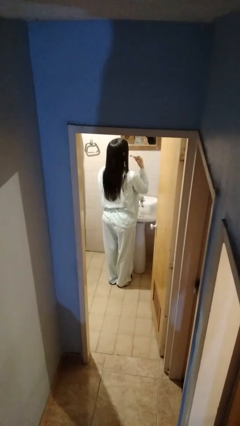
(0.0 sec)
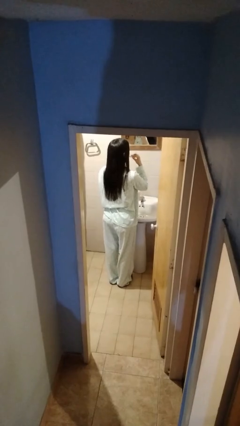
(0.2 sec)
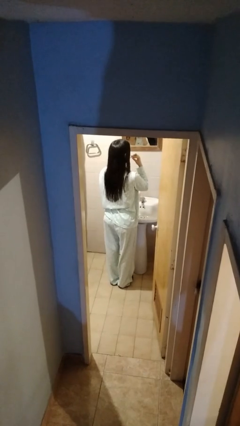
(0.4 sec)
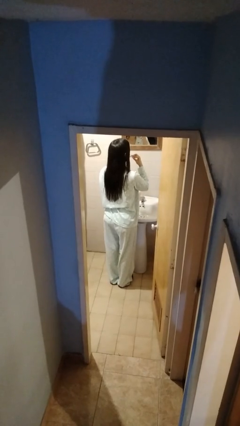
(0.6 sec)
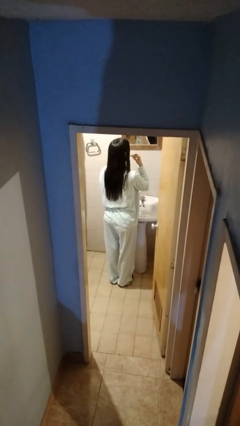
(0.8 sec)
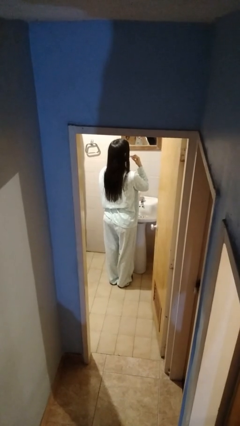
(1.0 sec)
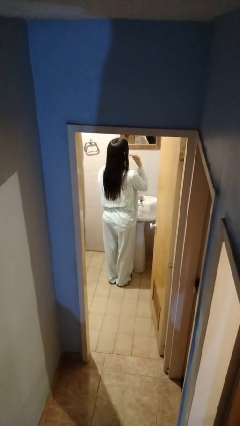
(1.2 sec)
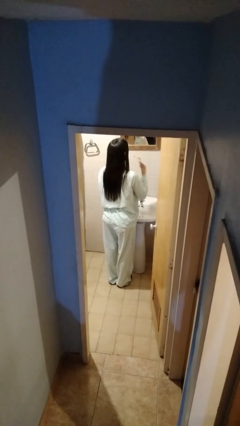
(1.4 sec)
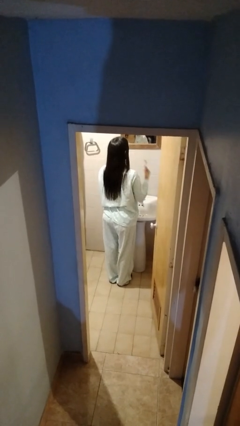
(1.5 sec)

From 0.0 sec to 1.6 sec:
person brushes teeth

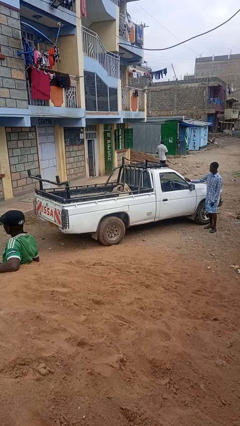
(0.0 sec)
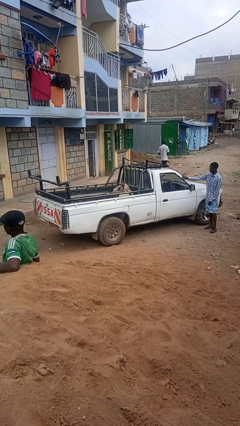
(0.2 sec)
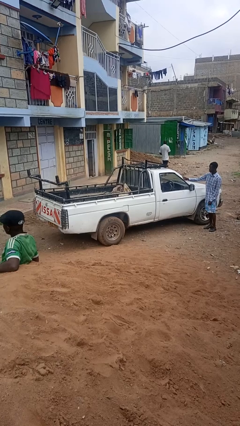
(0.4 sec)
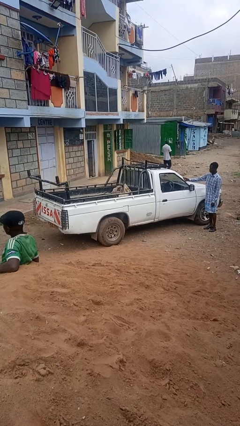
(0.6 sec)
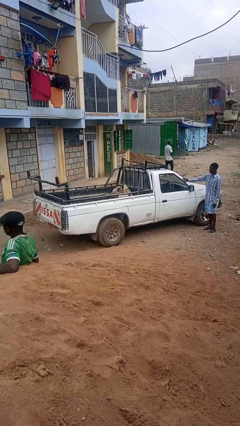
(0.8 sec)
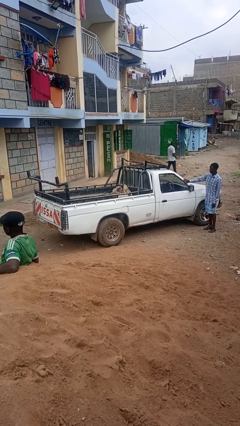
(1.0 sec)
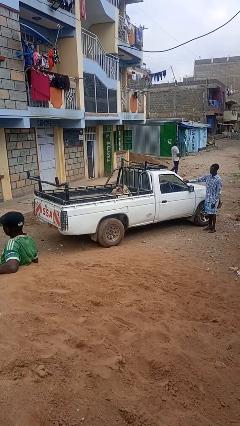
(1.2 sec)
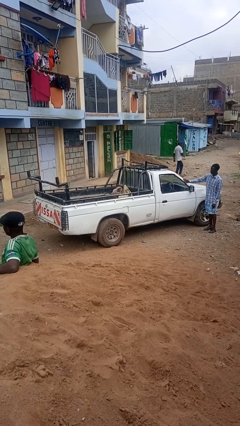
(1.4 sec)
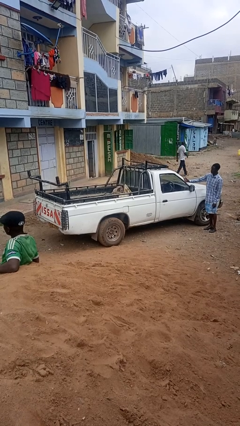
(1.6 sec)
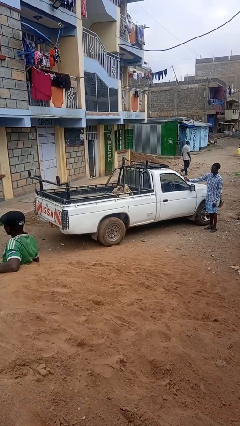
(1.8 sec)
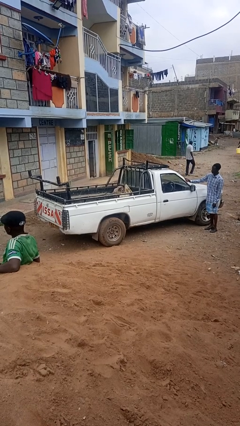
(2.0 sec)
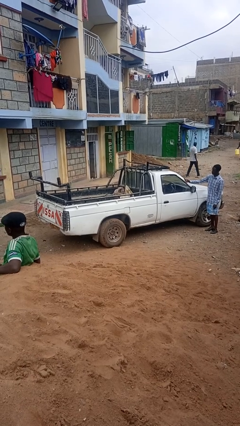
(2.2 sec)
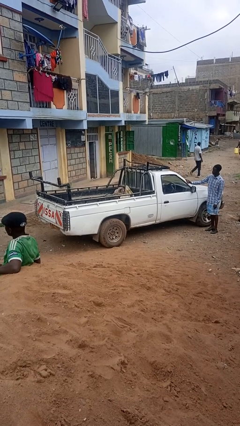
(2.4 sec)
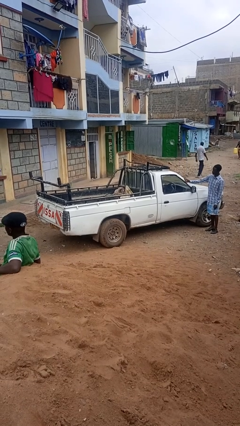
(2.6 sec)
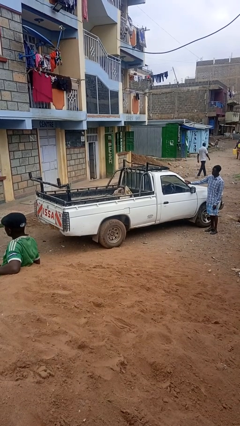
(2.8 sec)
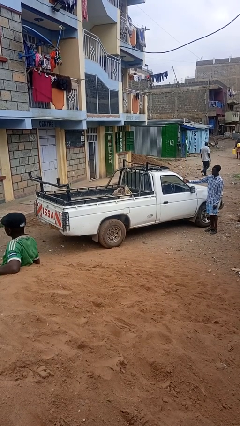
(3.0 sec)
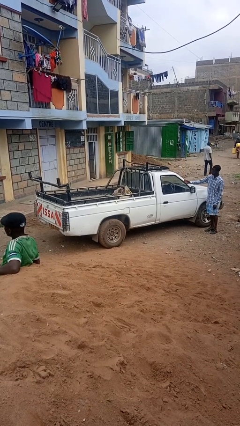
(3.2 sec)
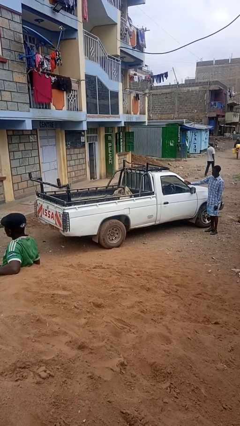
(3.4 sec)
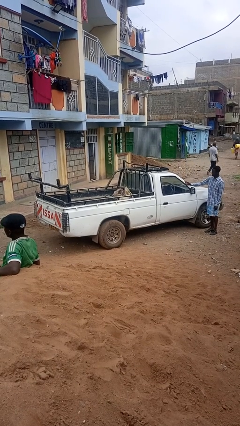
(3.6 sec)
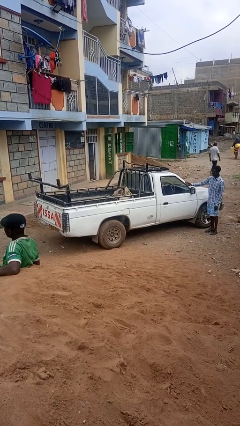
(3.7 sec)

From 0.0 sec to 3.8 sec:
person polishes car with rag

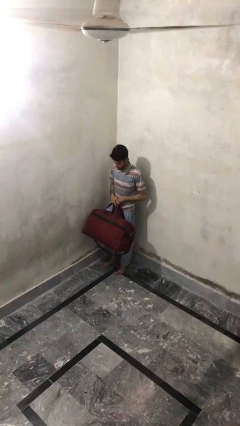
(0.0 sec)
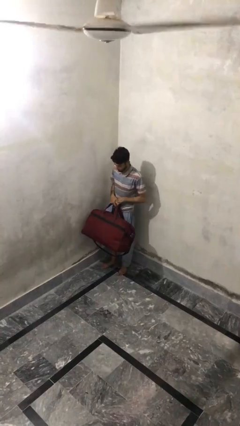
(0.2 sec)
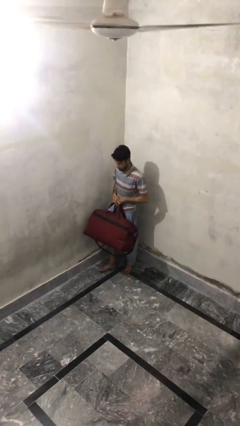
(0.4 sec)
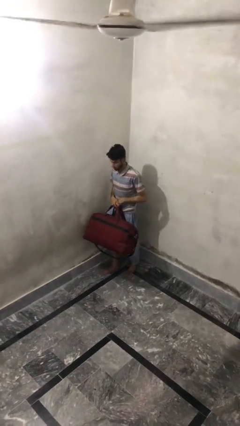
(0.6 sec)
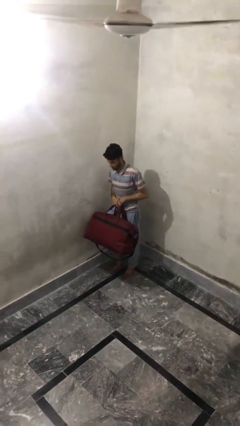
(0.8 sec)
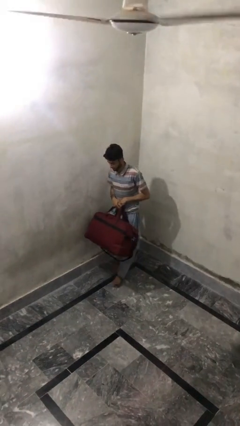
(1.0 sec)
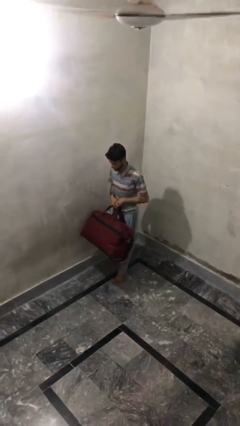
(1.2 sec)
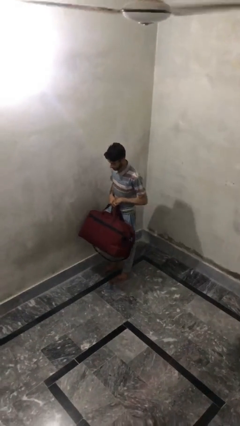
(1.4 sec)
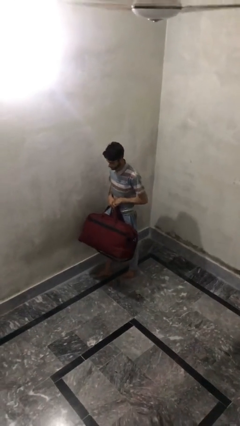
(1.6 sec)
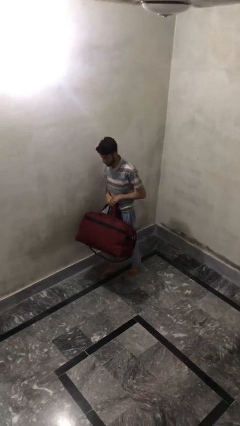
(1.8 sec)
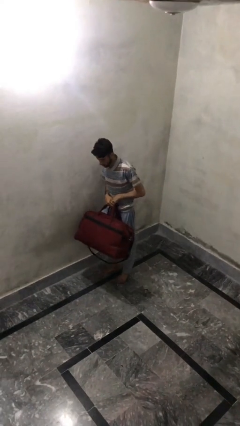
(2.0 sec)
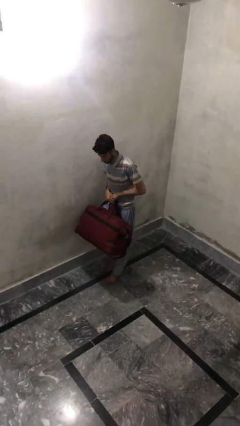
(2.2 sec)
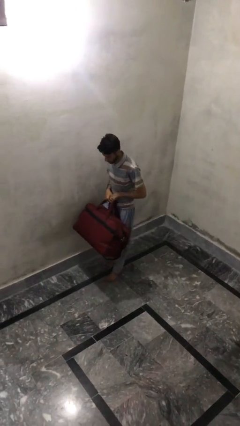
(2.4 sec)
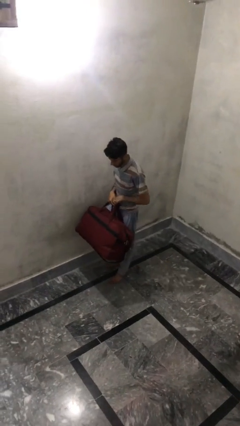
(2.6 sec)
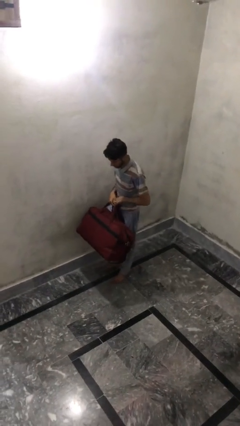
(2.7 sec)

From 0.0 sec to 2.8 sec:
person carries heavy object

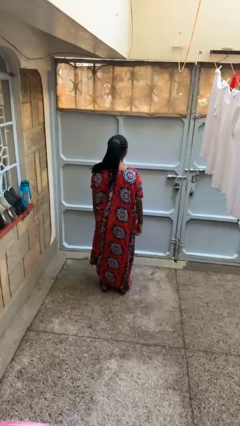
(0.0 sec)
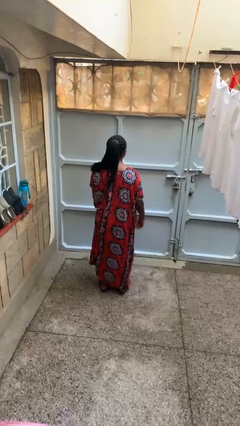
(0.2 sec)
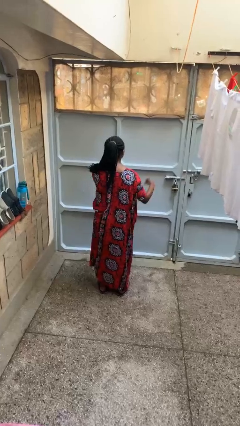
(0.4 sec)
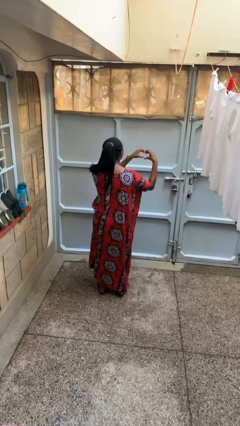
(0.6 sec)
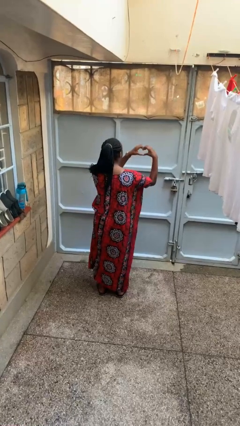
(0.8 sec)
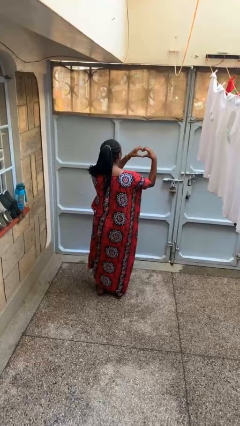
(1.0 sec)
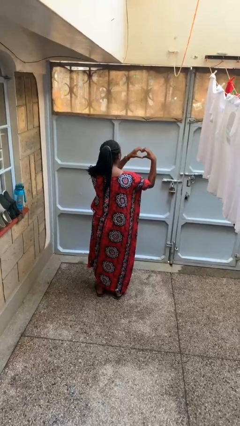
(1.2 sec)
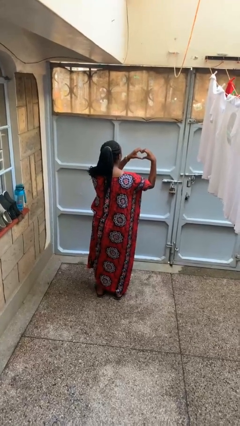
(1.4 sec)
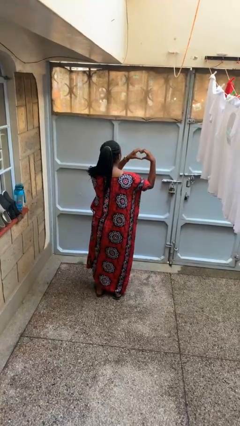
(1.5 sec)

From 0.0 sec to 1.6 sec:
person gestures heart

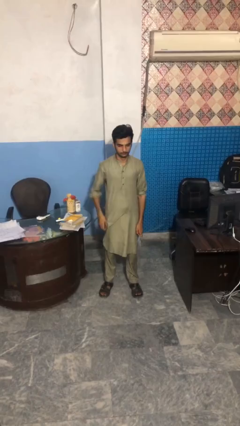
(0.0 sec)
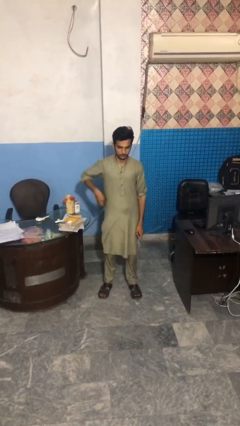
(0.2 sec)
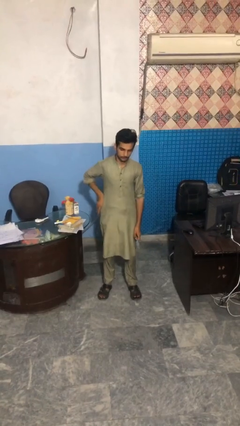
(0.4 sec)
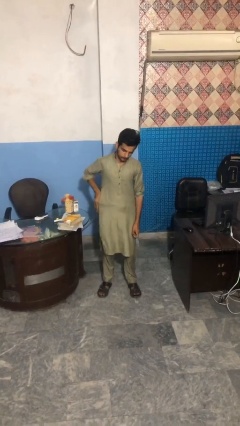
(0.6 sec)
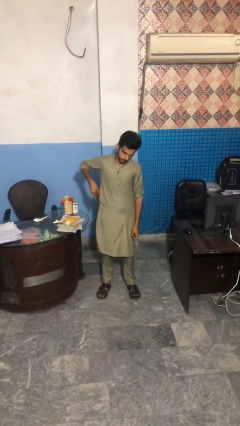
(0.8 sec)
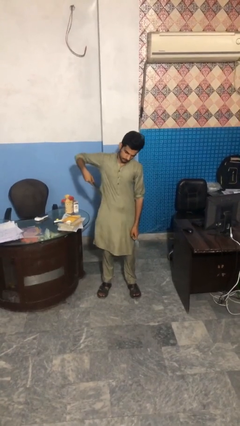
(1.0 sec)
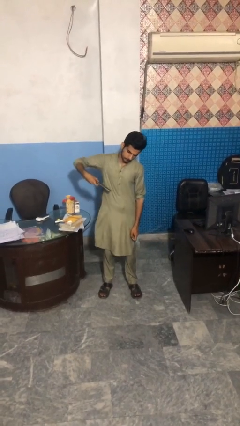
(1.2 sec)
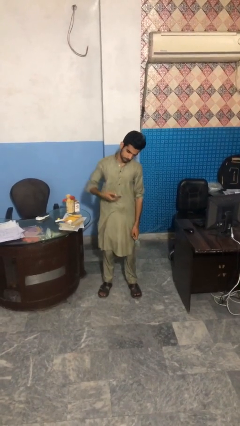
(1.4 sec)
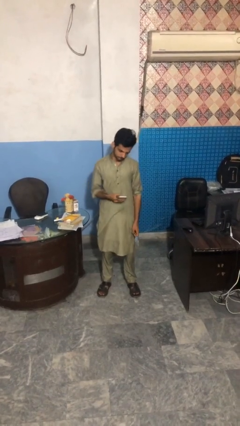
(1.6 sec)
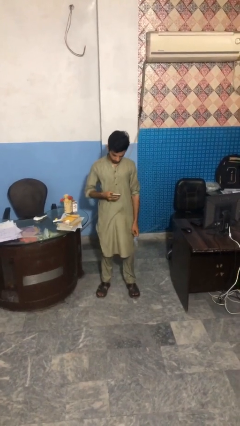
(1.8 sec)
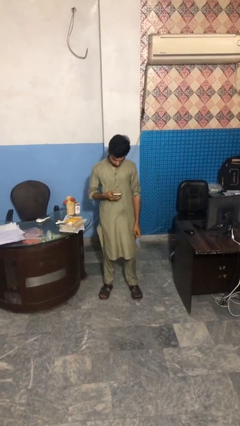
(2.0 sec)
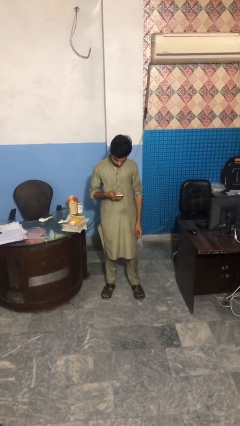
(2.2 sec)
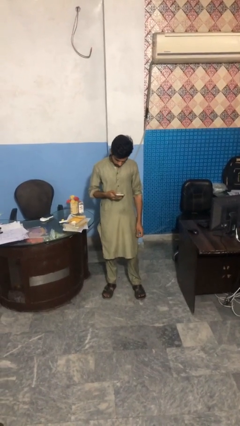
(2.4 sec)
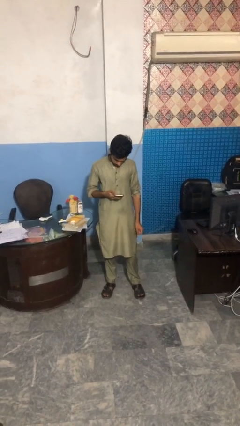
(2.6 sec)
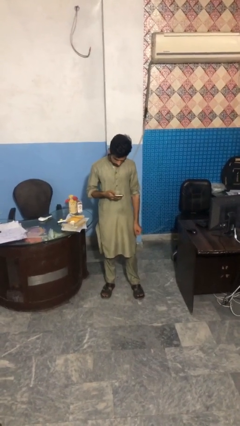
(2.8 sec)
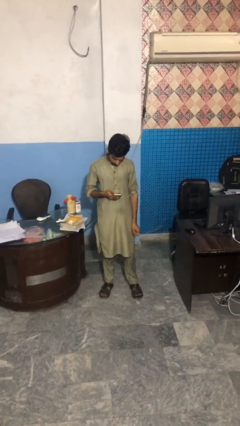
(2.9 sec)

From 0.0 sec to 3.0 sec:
person takes phone from pocket

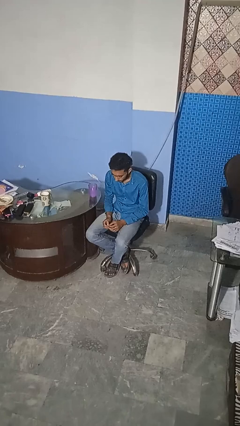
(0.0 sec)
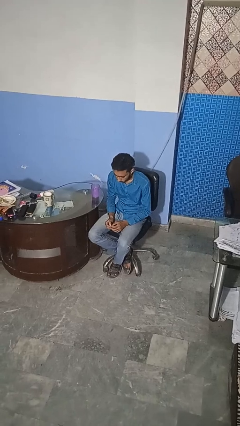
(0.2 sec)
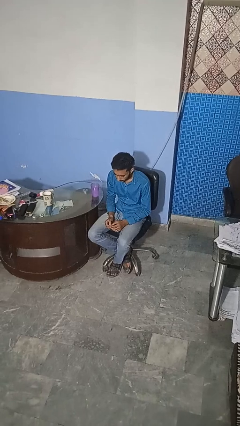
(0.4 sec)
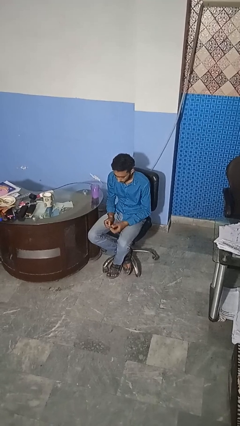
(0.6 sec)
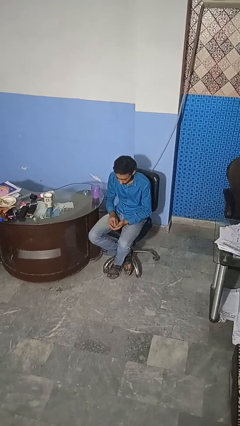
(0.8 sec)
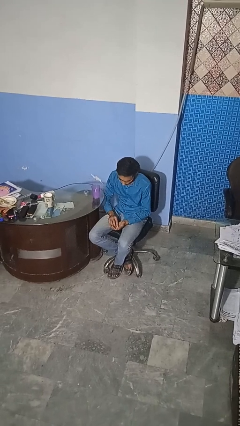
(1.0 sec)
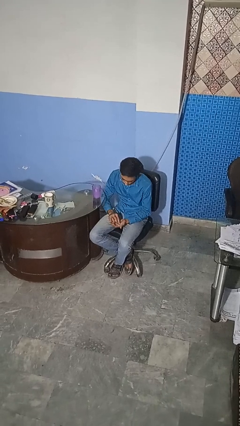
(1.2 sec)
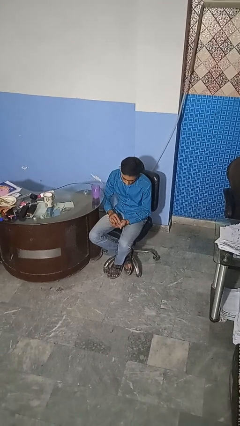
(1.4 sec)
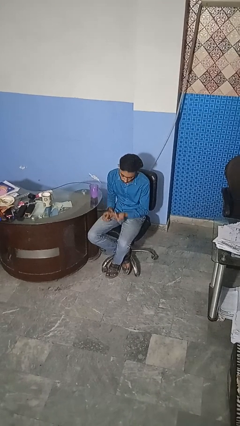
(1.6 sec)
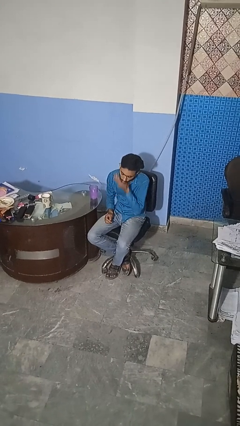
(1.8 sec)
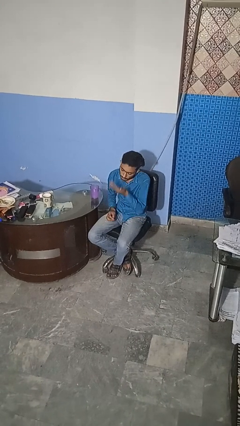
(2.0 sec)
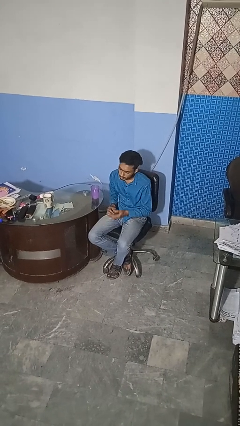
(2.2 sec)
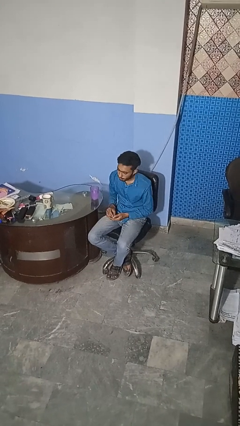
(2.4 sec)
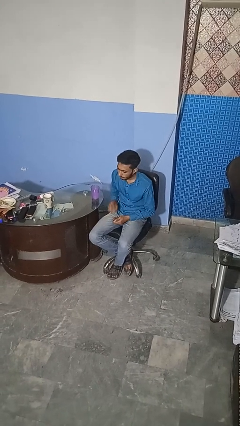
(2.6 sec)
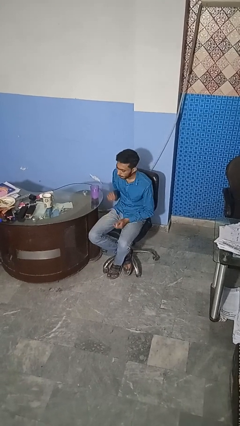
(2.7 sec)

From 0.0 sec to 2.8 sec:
person takes medicine pills

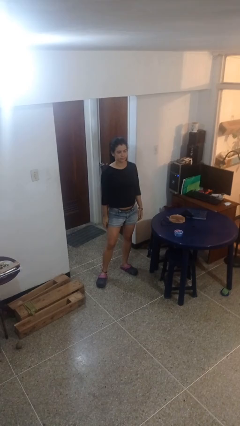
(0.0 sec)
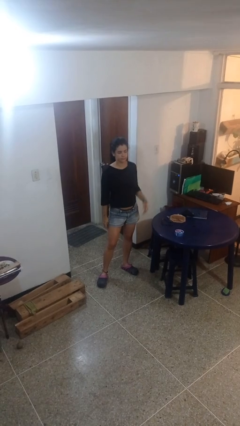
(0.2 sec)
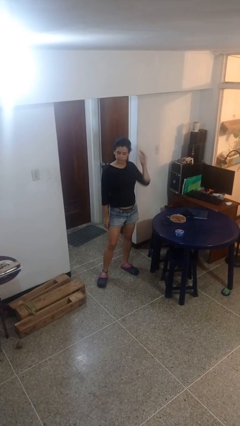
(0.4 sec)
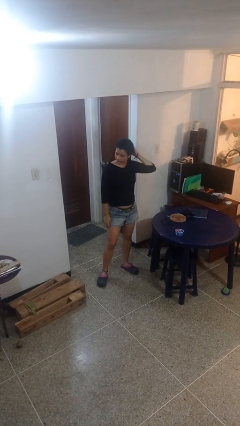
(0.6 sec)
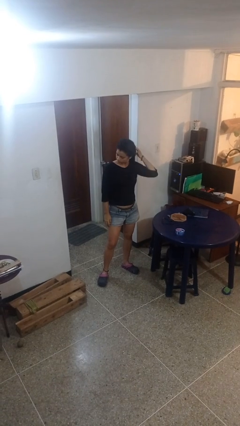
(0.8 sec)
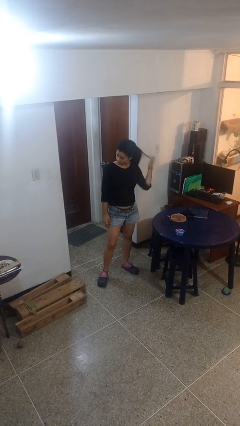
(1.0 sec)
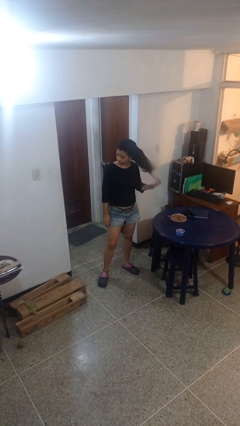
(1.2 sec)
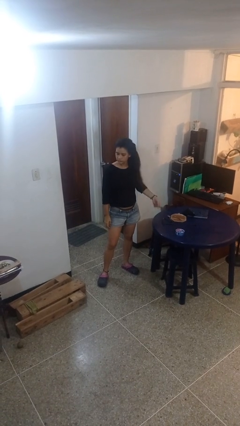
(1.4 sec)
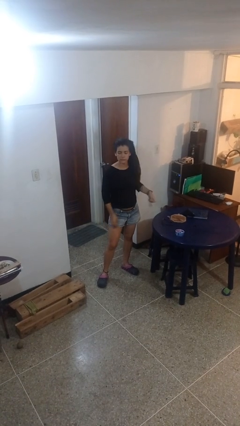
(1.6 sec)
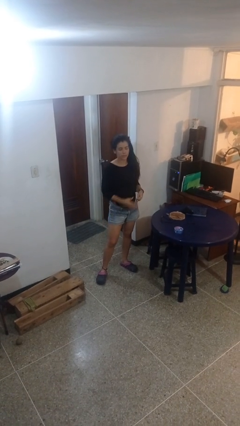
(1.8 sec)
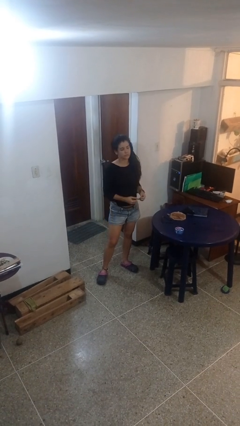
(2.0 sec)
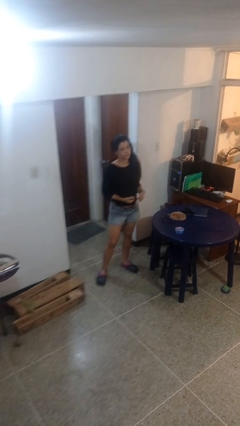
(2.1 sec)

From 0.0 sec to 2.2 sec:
person takes off hairtie
